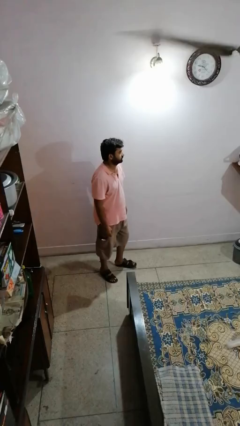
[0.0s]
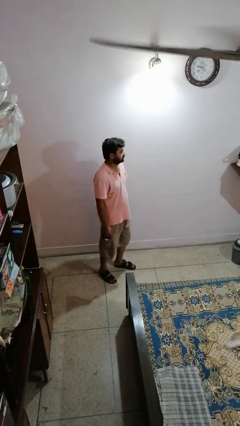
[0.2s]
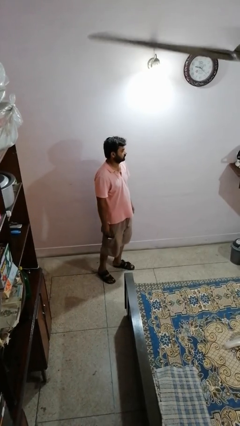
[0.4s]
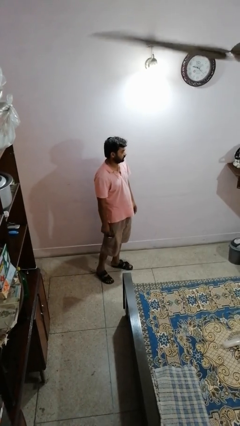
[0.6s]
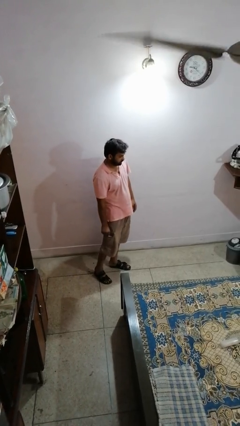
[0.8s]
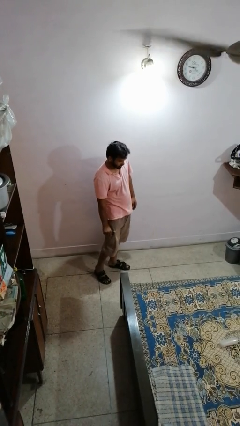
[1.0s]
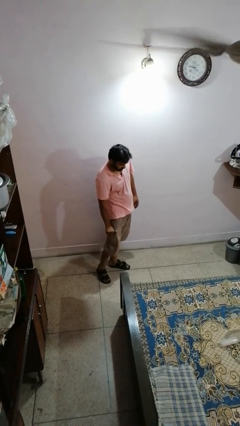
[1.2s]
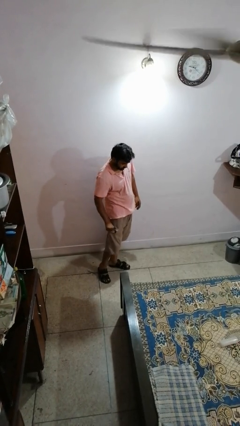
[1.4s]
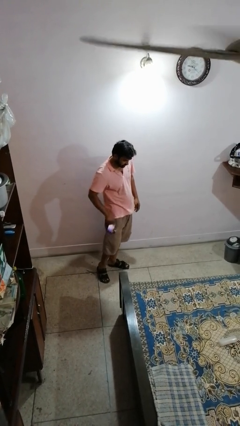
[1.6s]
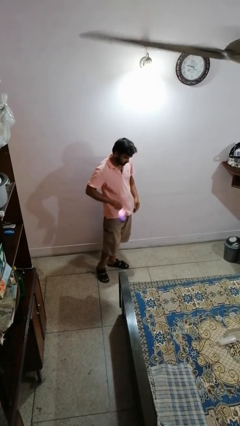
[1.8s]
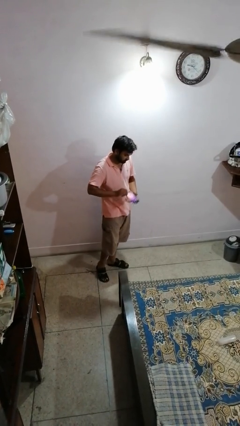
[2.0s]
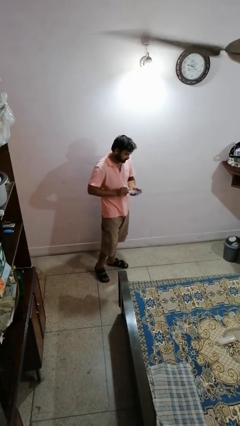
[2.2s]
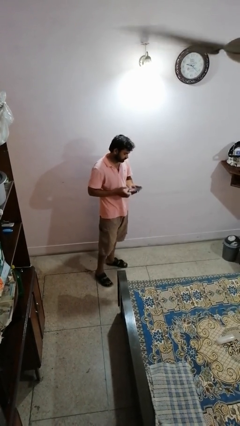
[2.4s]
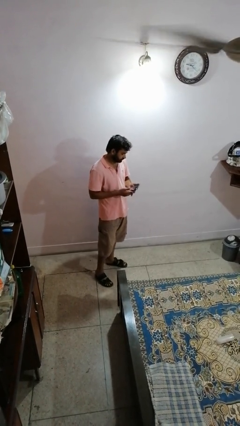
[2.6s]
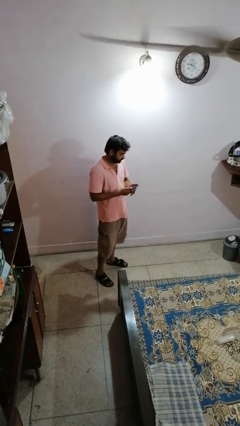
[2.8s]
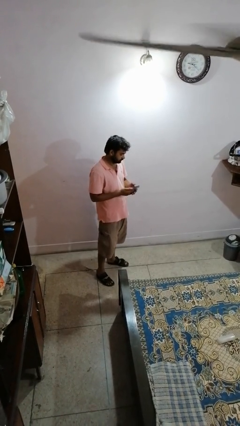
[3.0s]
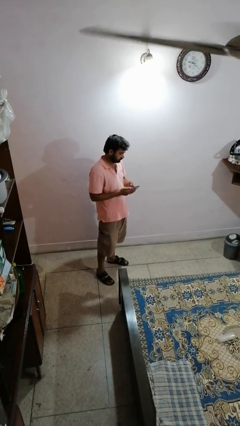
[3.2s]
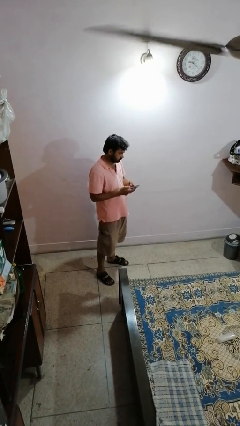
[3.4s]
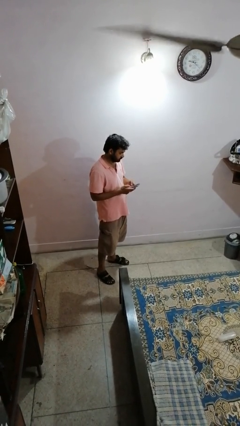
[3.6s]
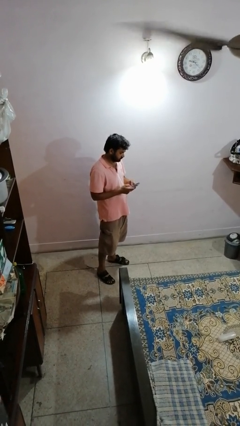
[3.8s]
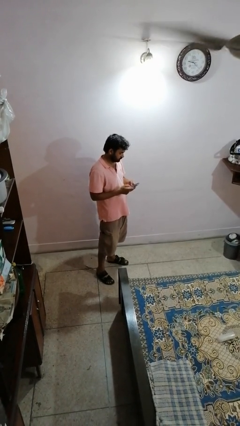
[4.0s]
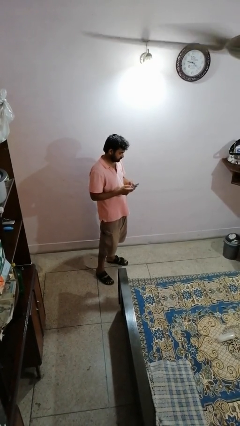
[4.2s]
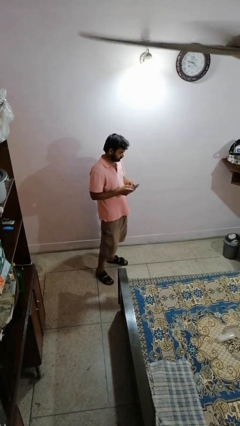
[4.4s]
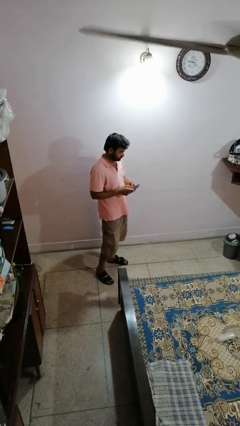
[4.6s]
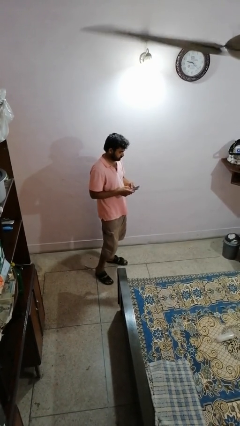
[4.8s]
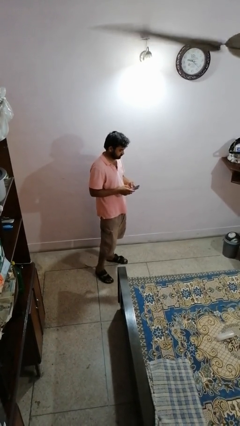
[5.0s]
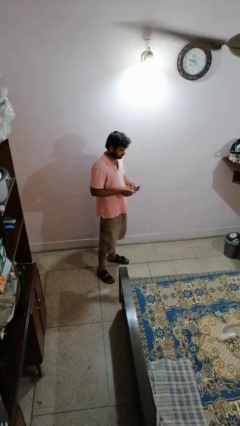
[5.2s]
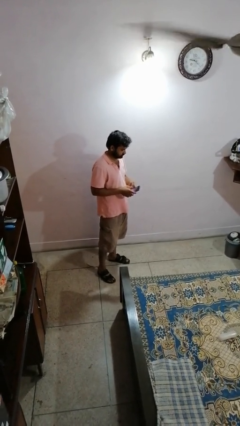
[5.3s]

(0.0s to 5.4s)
person takes phone from pocket

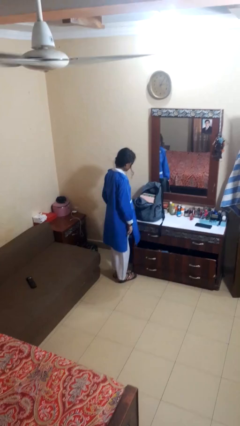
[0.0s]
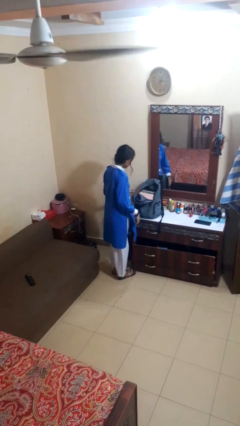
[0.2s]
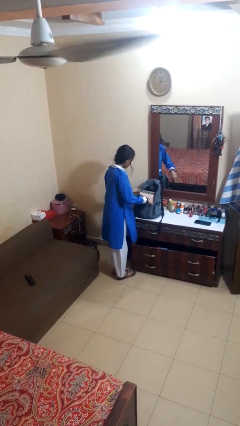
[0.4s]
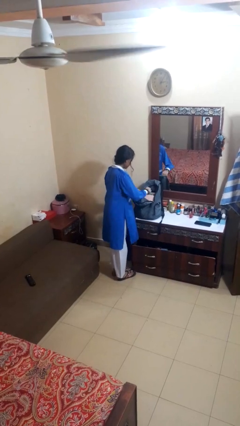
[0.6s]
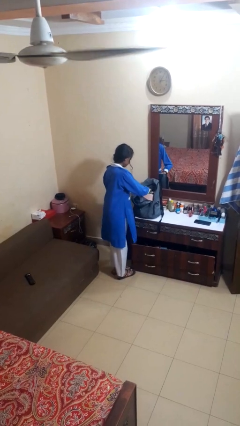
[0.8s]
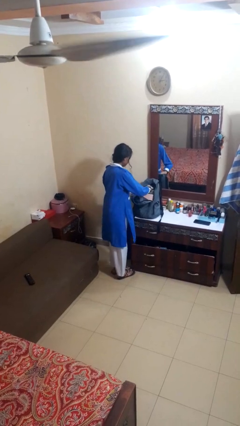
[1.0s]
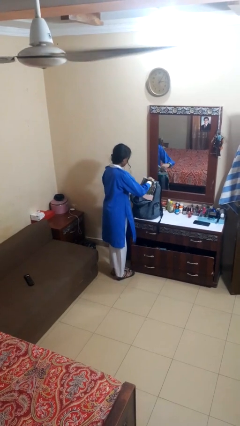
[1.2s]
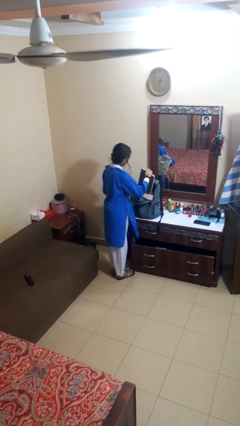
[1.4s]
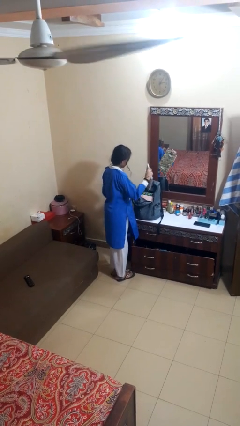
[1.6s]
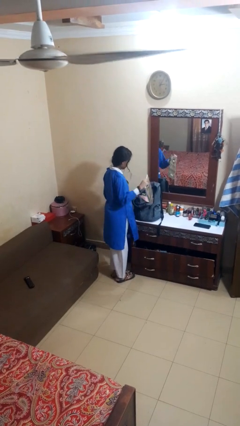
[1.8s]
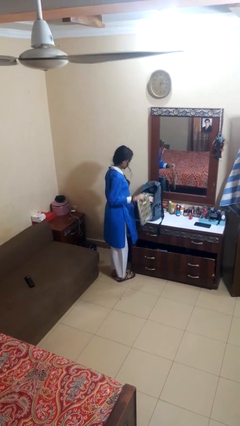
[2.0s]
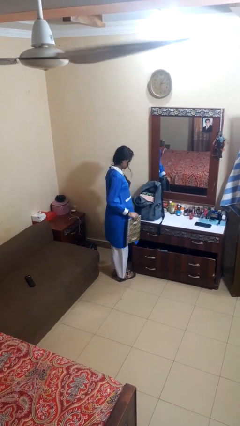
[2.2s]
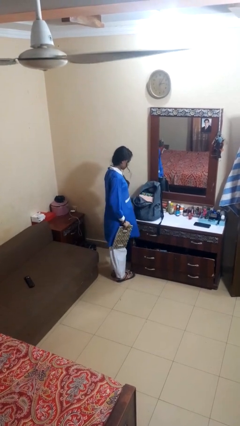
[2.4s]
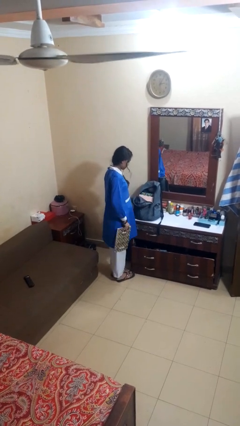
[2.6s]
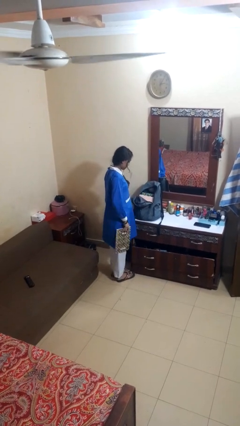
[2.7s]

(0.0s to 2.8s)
person takes object from bag

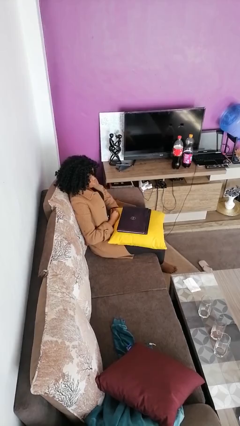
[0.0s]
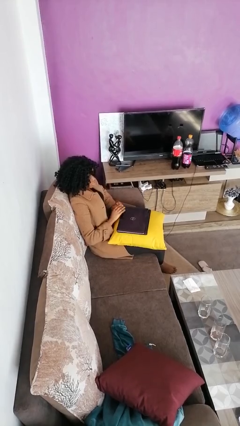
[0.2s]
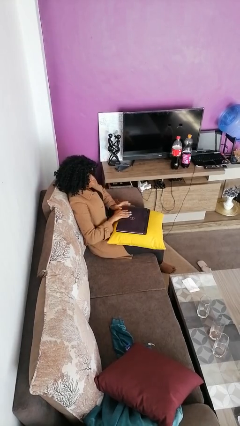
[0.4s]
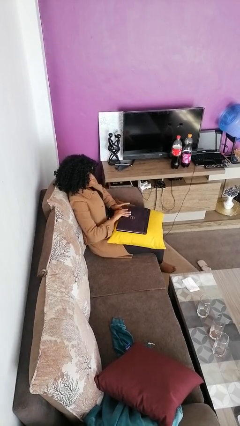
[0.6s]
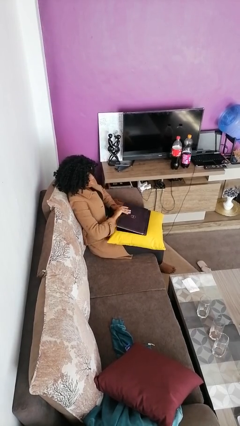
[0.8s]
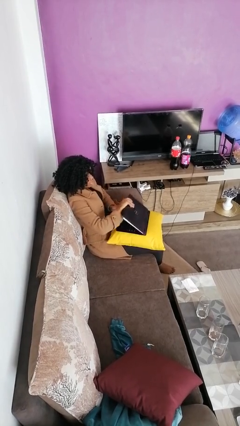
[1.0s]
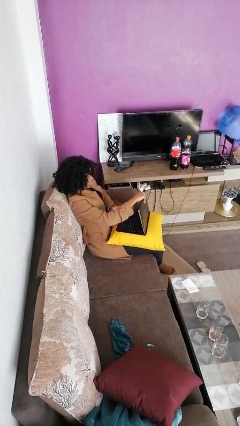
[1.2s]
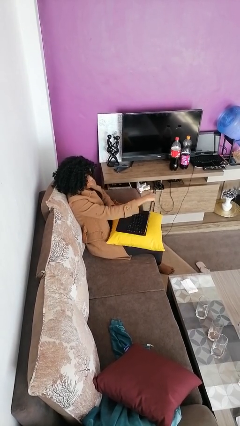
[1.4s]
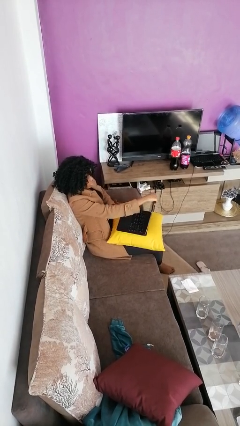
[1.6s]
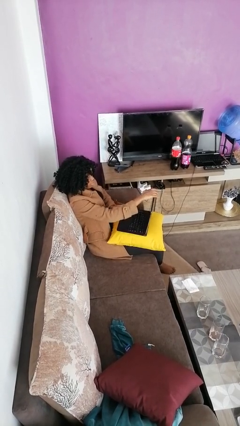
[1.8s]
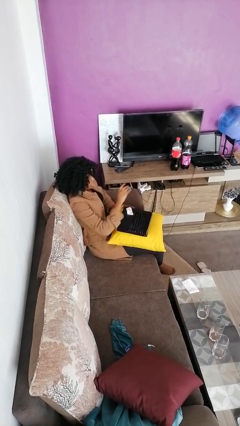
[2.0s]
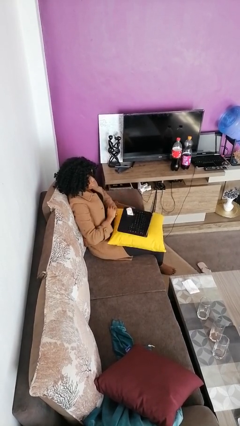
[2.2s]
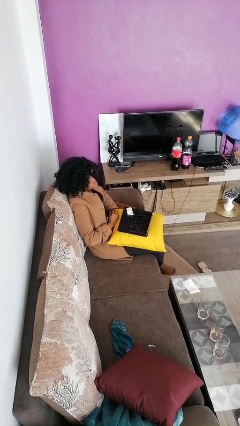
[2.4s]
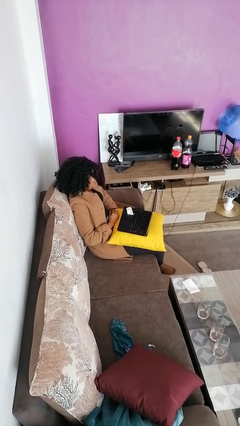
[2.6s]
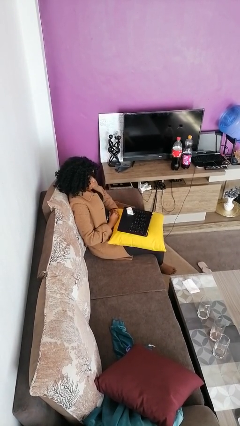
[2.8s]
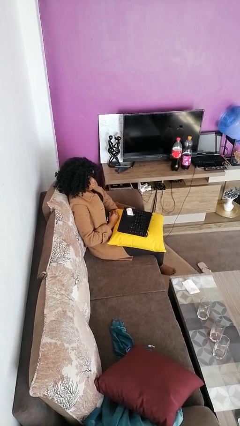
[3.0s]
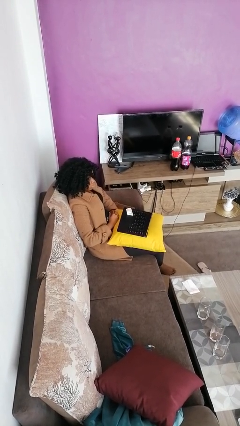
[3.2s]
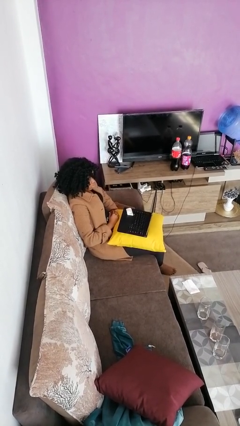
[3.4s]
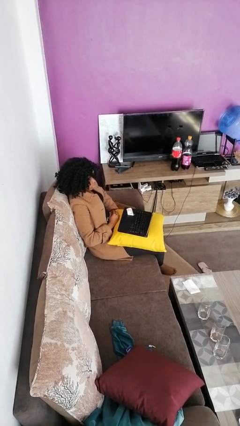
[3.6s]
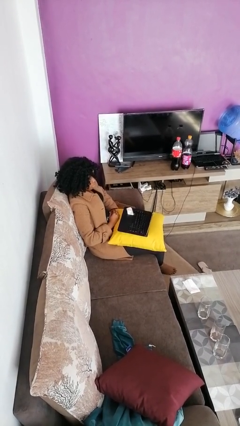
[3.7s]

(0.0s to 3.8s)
person opens laptop

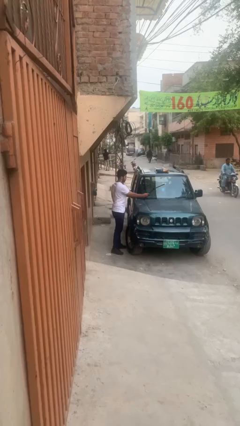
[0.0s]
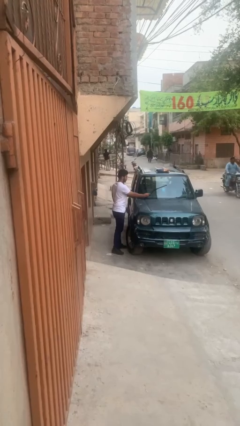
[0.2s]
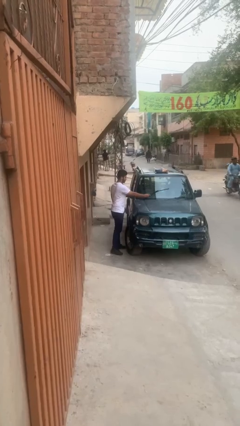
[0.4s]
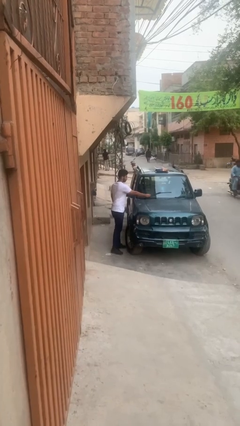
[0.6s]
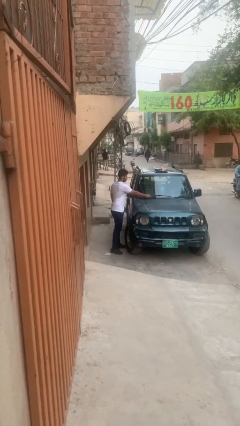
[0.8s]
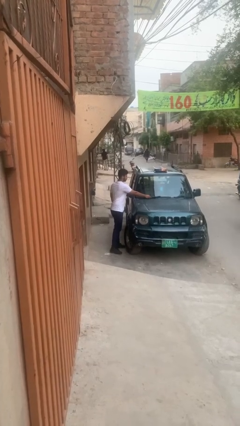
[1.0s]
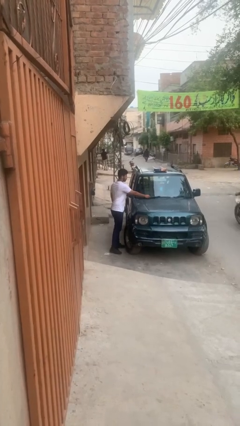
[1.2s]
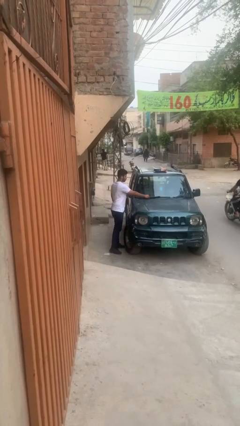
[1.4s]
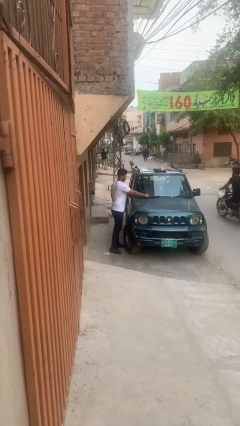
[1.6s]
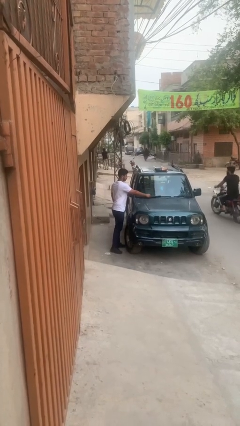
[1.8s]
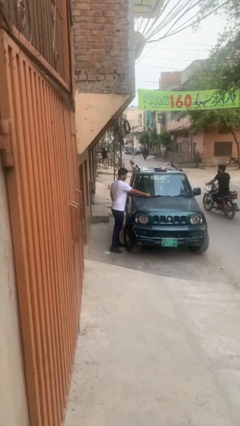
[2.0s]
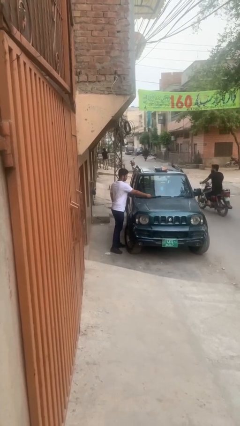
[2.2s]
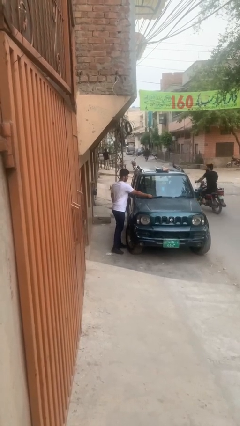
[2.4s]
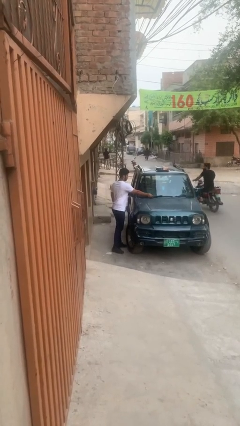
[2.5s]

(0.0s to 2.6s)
person flips down car wipers

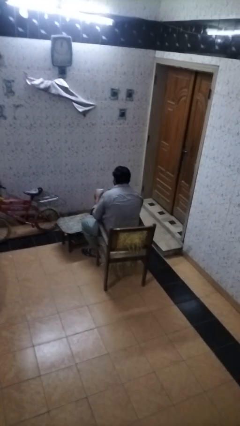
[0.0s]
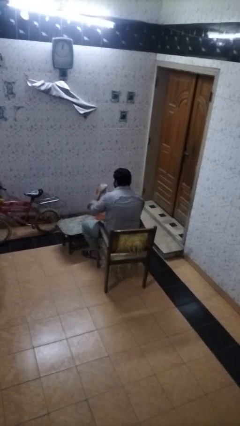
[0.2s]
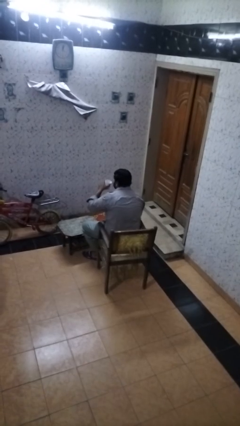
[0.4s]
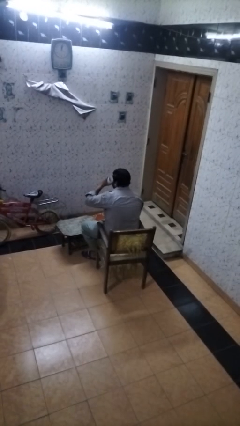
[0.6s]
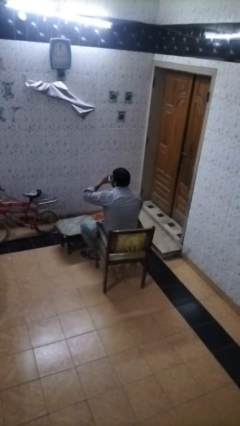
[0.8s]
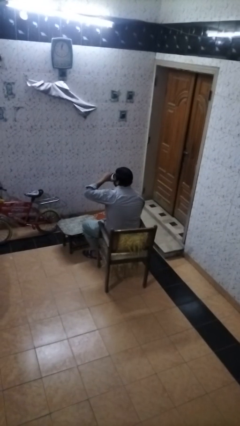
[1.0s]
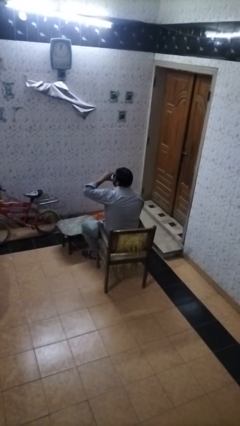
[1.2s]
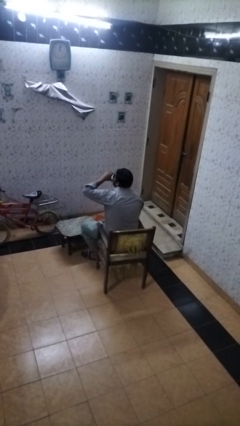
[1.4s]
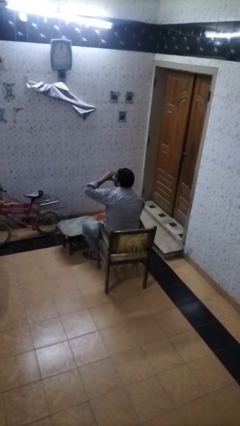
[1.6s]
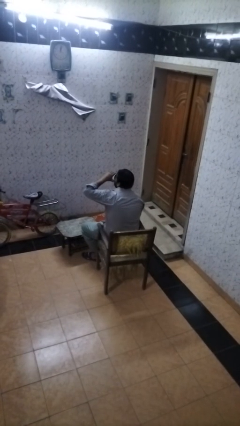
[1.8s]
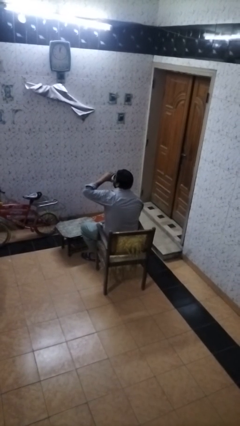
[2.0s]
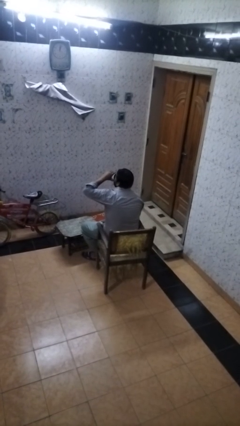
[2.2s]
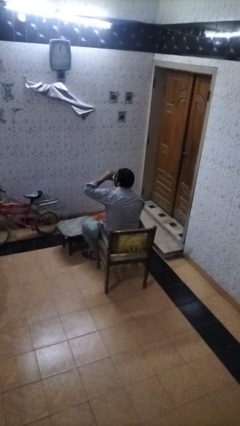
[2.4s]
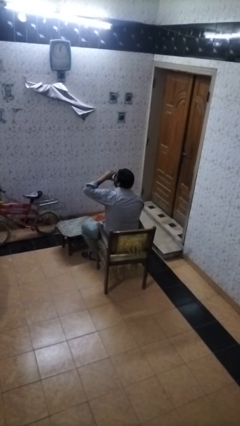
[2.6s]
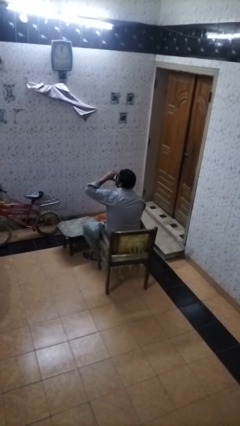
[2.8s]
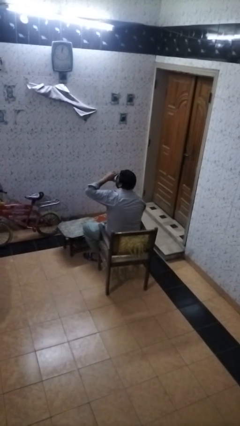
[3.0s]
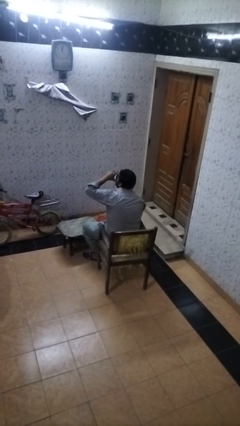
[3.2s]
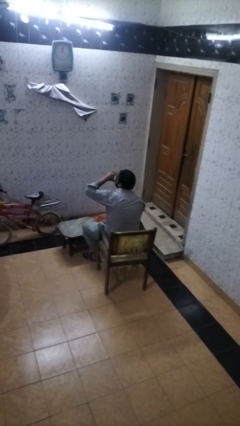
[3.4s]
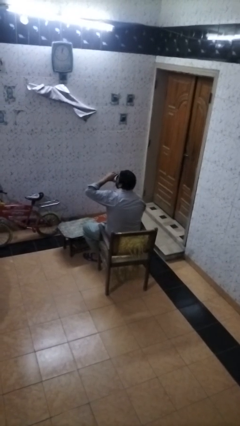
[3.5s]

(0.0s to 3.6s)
person drinks from mug
